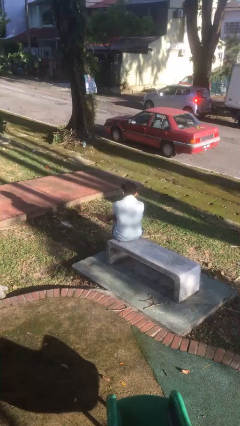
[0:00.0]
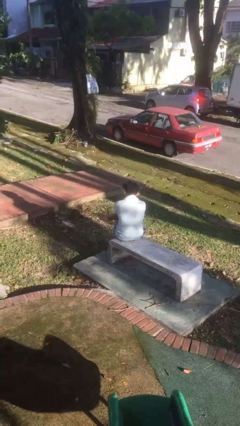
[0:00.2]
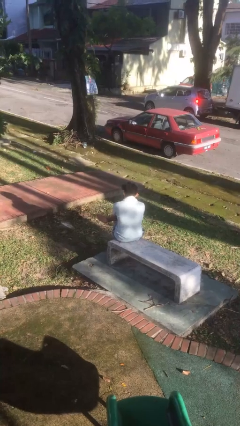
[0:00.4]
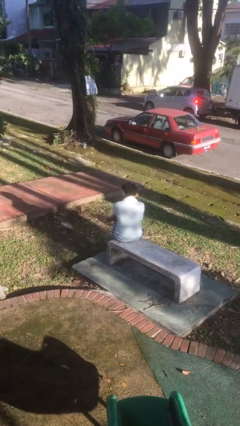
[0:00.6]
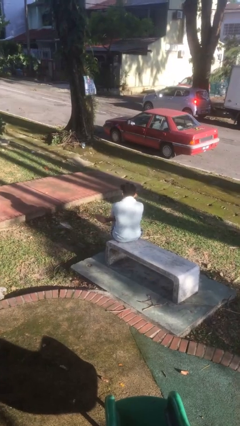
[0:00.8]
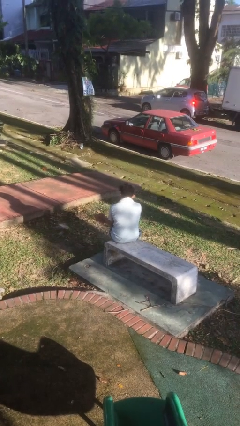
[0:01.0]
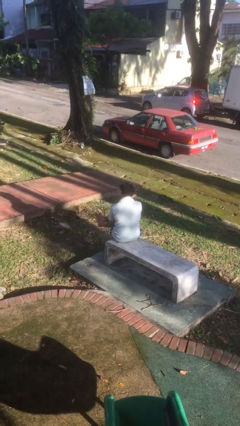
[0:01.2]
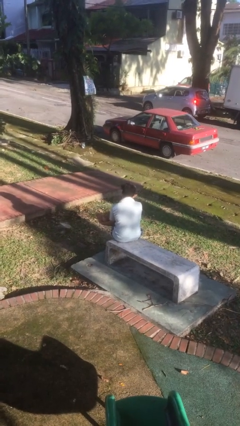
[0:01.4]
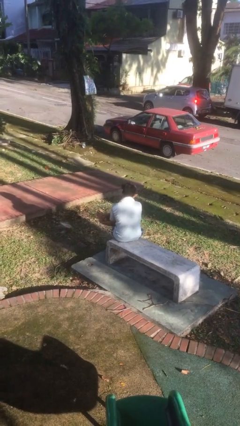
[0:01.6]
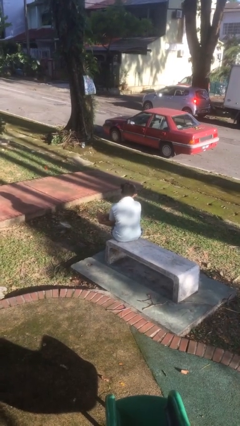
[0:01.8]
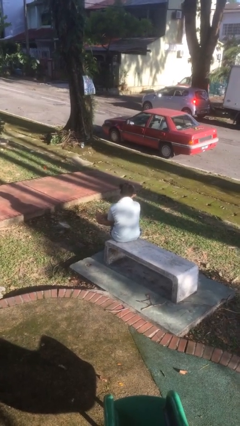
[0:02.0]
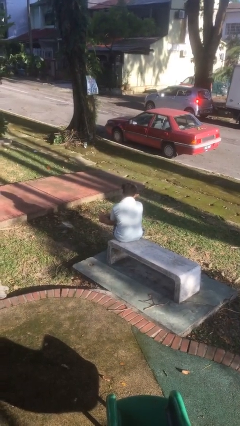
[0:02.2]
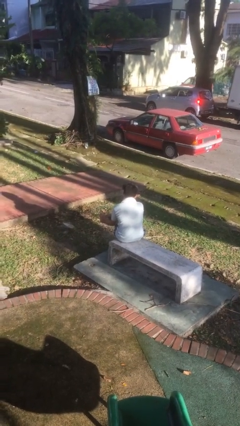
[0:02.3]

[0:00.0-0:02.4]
person rubs foot

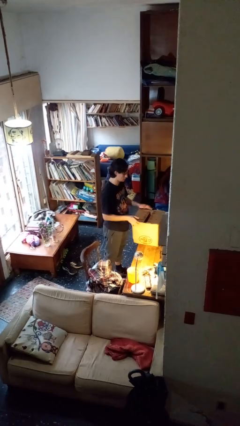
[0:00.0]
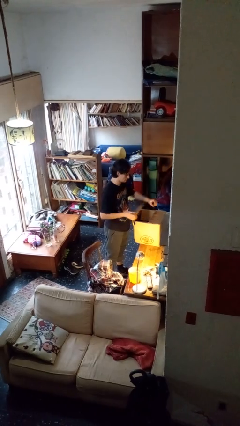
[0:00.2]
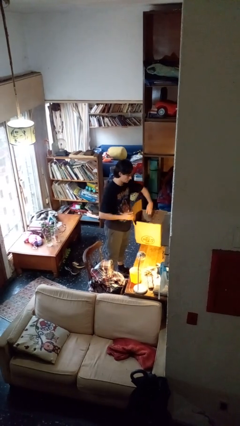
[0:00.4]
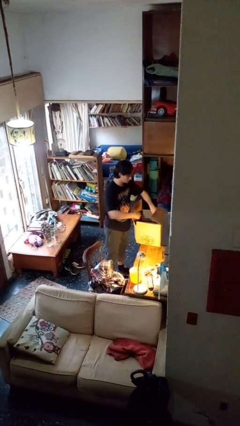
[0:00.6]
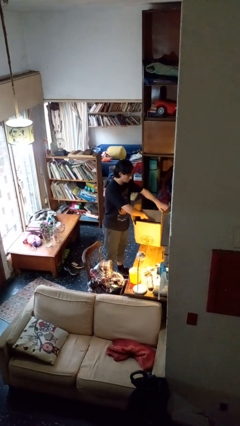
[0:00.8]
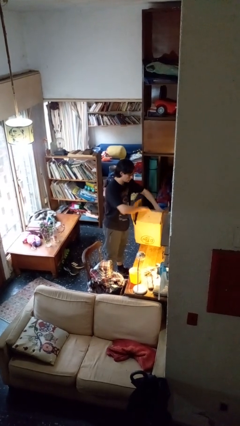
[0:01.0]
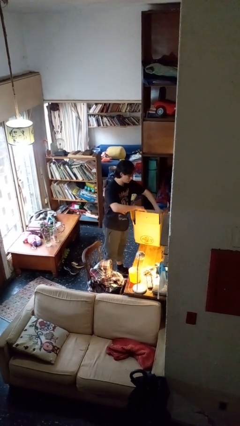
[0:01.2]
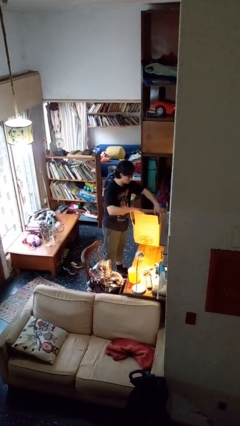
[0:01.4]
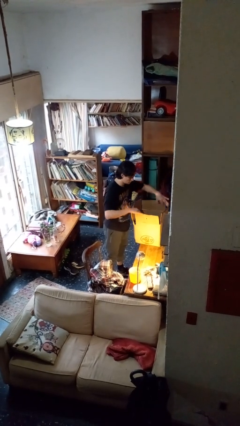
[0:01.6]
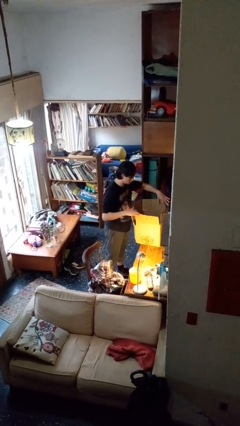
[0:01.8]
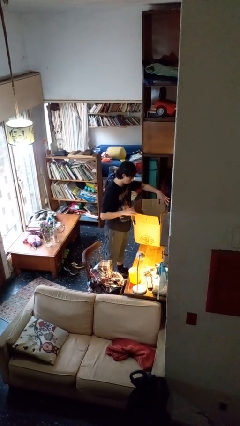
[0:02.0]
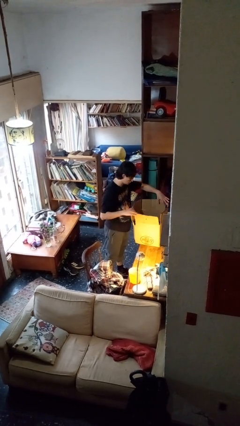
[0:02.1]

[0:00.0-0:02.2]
person opens box

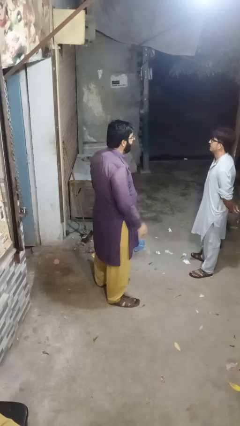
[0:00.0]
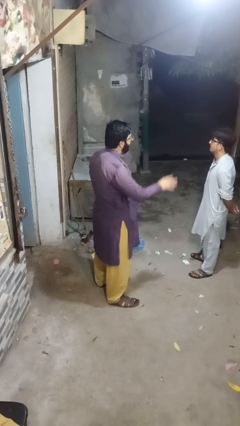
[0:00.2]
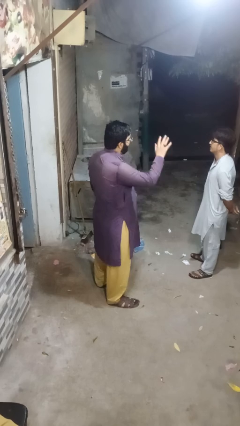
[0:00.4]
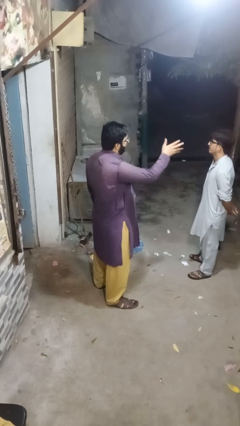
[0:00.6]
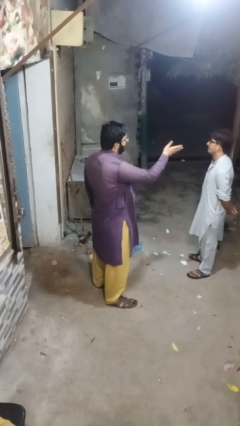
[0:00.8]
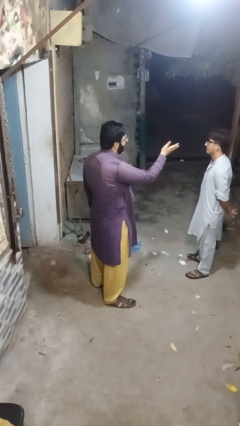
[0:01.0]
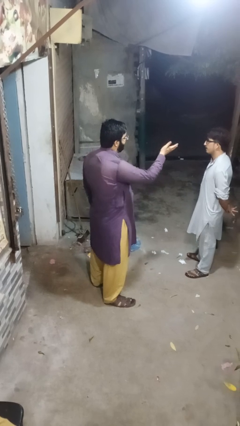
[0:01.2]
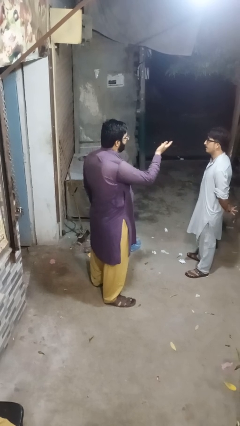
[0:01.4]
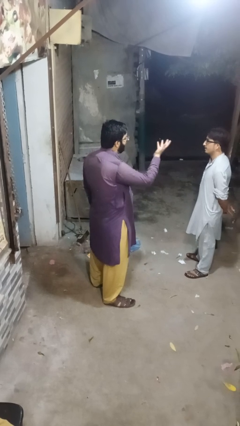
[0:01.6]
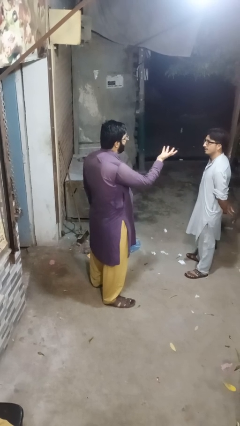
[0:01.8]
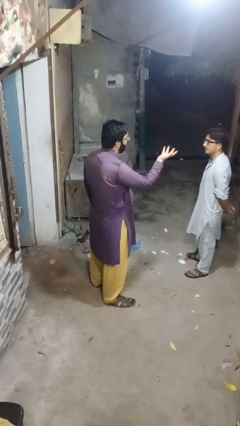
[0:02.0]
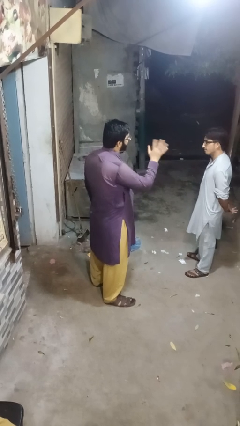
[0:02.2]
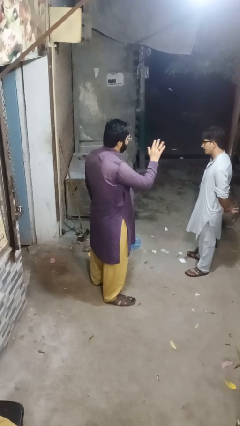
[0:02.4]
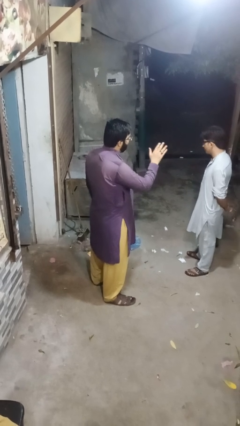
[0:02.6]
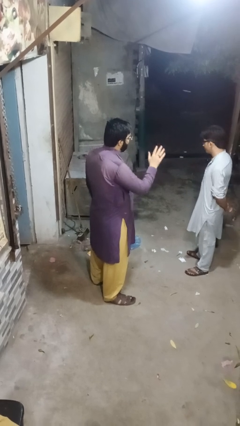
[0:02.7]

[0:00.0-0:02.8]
person waves at person

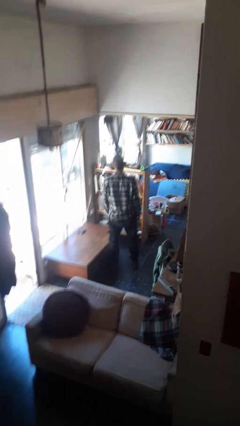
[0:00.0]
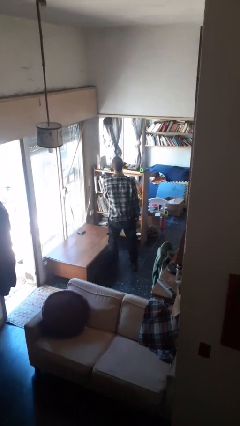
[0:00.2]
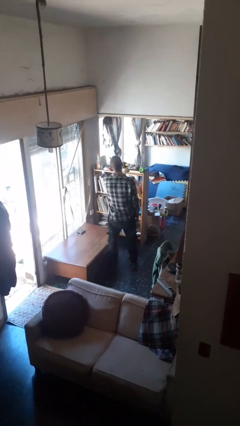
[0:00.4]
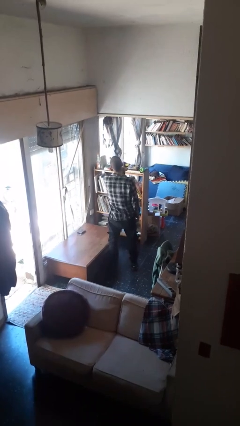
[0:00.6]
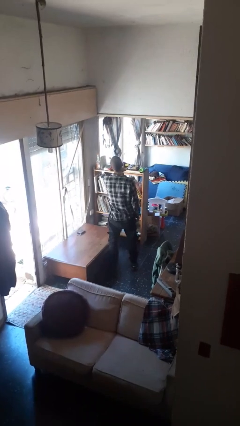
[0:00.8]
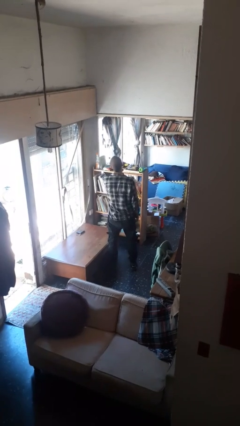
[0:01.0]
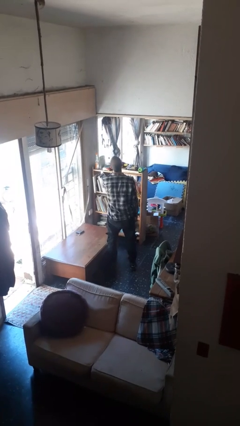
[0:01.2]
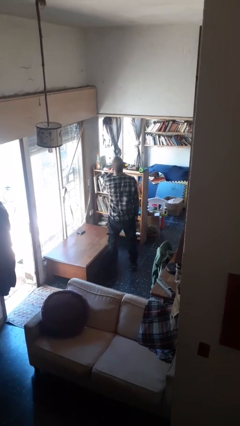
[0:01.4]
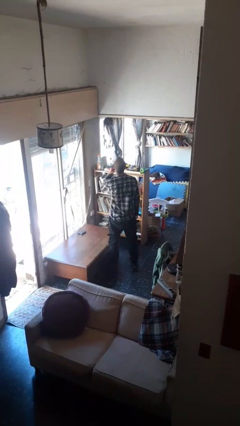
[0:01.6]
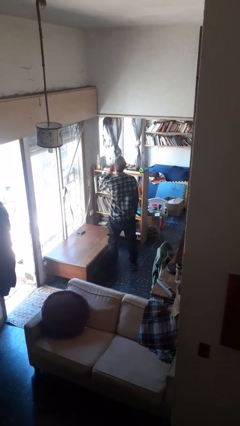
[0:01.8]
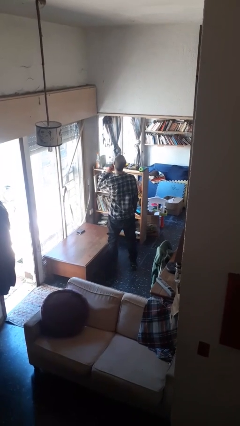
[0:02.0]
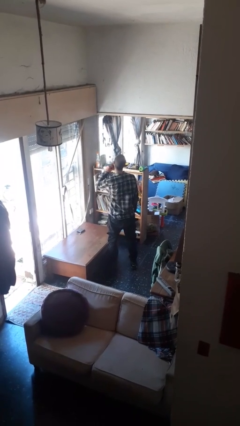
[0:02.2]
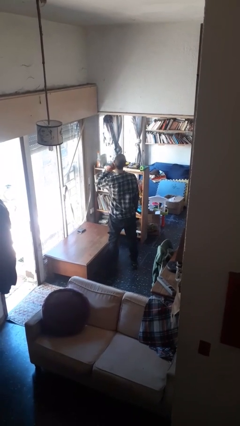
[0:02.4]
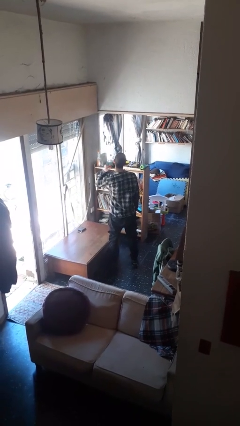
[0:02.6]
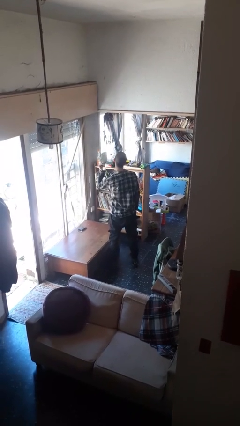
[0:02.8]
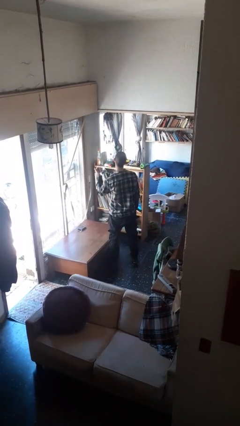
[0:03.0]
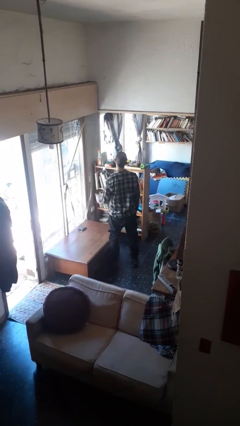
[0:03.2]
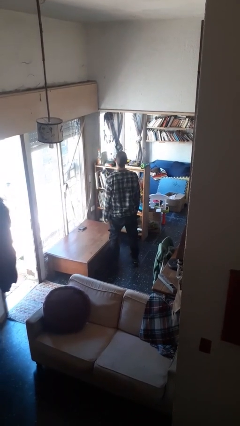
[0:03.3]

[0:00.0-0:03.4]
person gestures cut

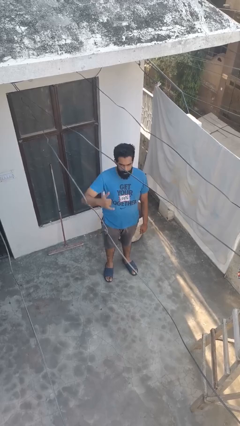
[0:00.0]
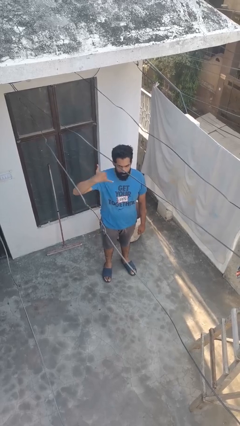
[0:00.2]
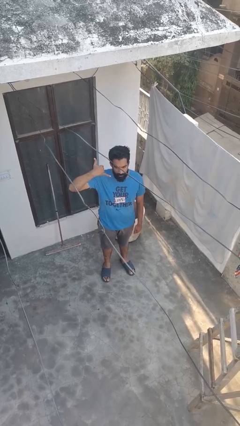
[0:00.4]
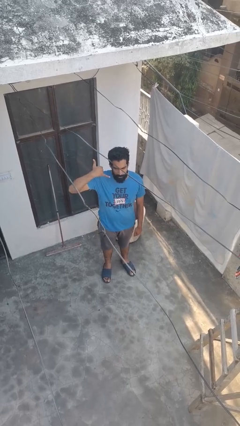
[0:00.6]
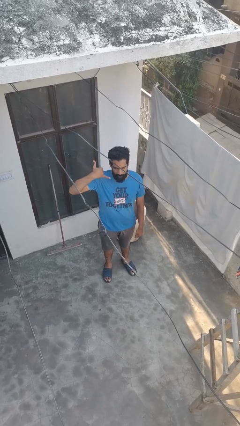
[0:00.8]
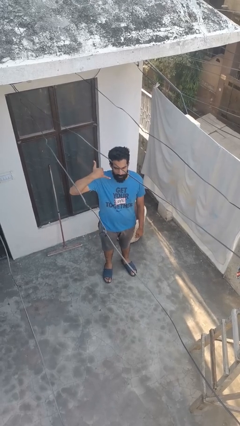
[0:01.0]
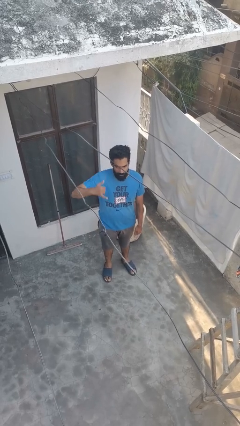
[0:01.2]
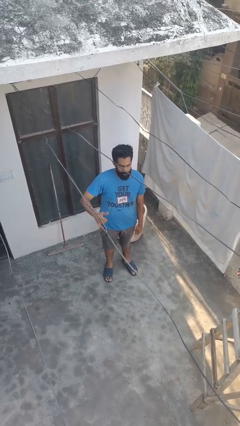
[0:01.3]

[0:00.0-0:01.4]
person gestures call me

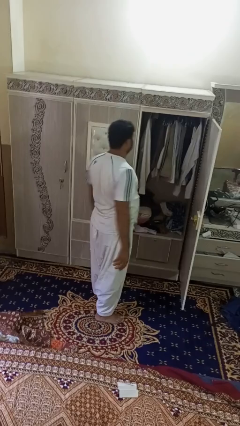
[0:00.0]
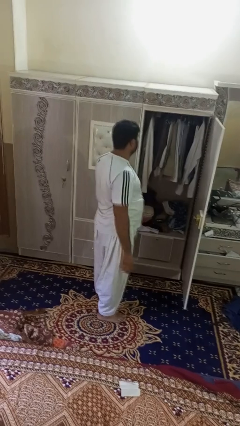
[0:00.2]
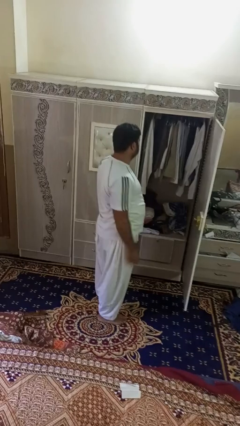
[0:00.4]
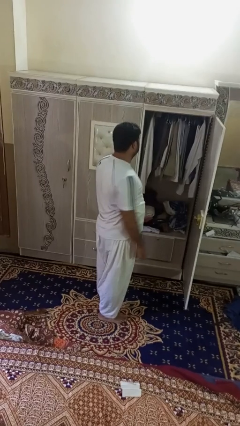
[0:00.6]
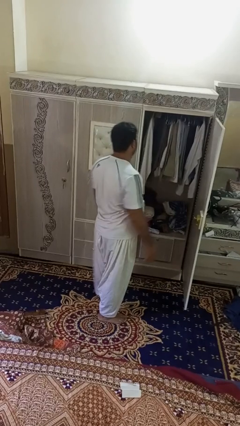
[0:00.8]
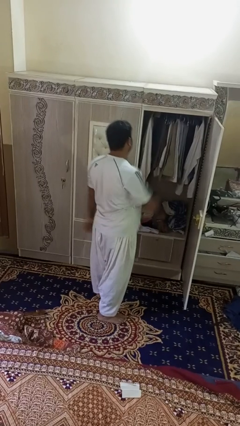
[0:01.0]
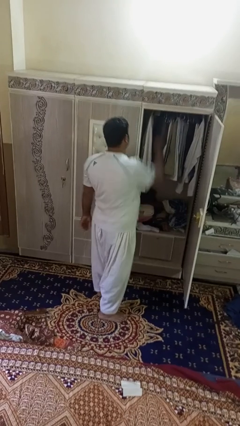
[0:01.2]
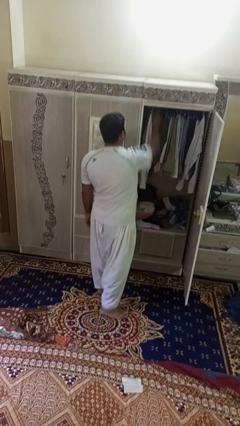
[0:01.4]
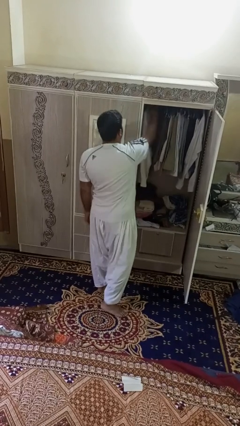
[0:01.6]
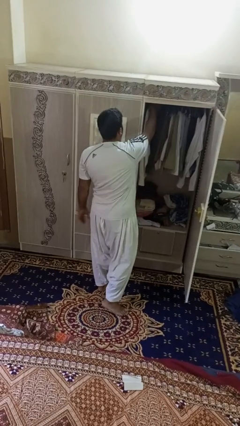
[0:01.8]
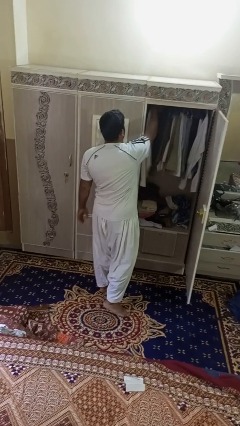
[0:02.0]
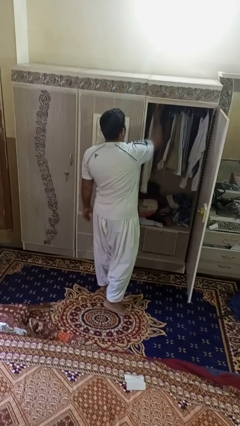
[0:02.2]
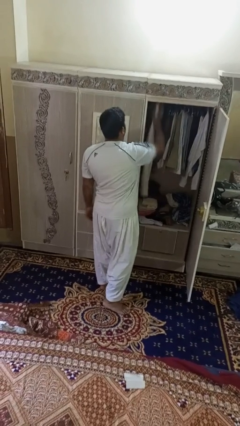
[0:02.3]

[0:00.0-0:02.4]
person takes clothes from closet

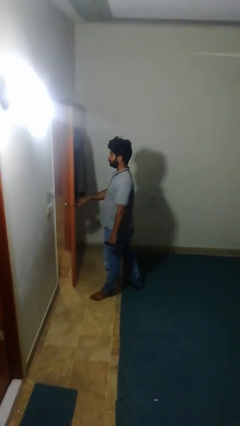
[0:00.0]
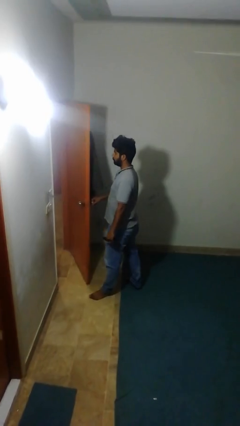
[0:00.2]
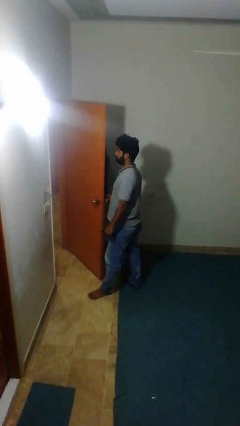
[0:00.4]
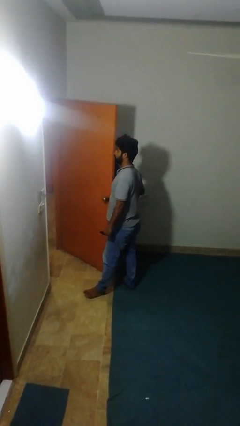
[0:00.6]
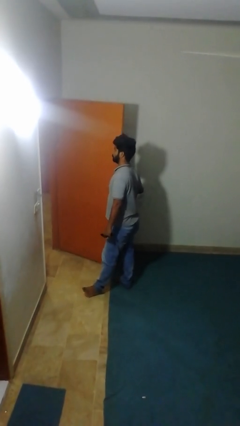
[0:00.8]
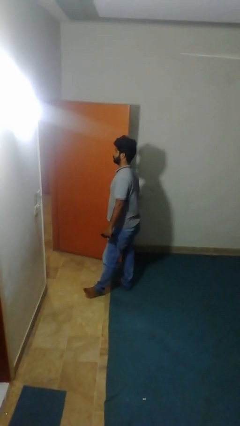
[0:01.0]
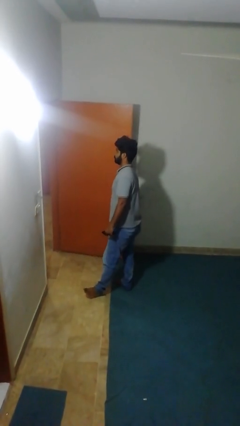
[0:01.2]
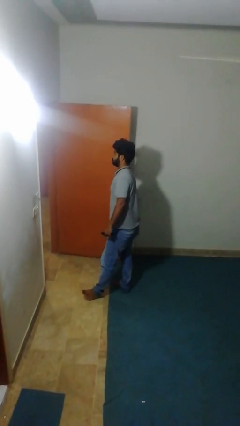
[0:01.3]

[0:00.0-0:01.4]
person opens facility door

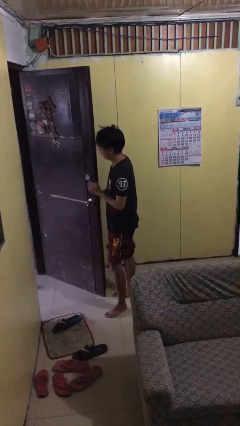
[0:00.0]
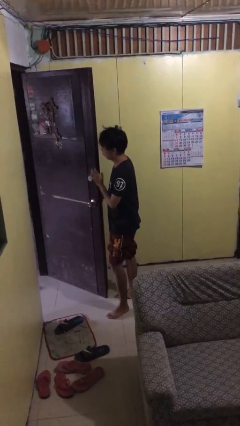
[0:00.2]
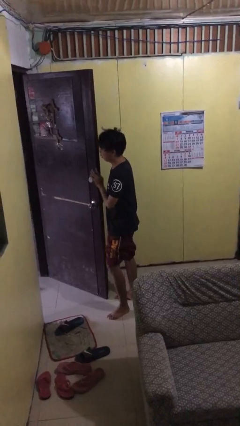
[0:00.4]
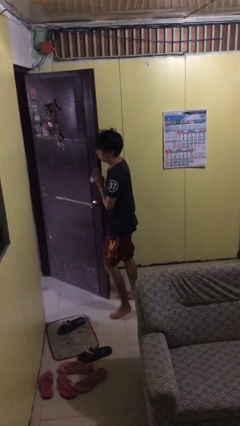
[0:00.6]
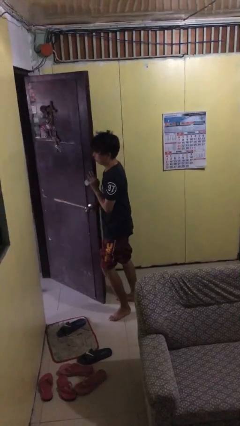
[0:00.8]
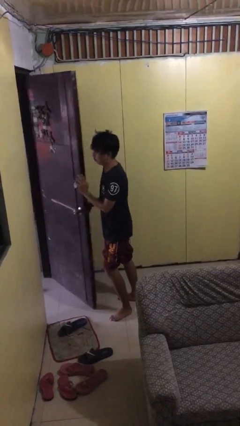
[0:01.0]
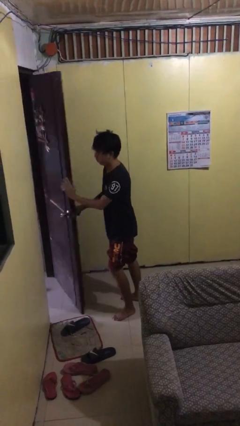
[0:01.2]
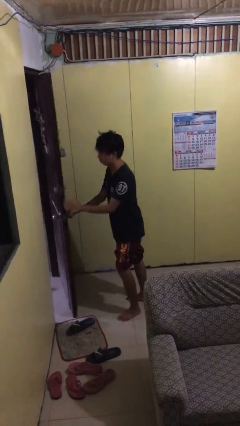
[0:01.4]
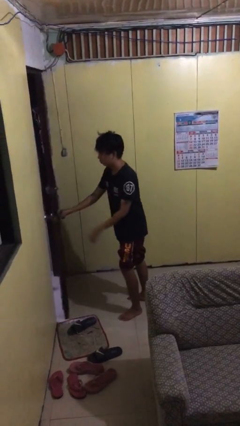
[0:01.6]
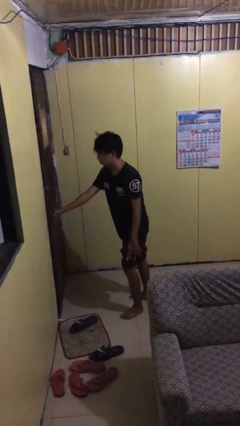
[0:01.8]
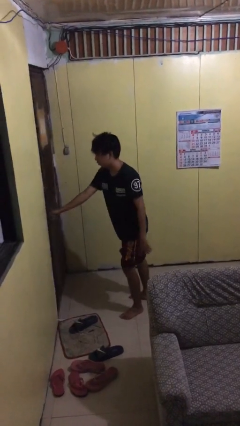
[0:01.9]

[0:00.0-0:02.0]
person closes facility door
